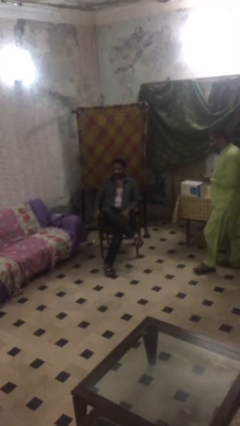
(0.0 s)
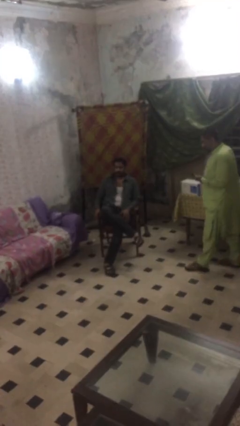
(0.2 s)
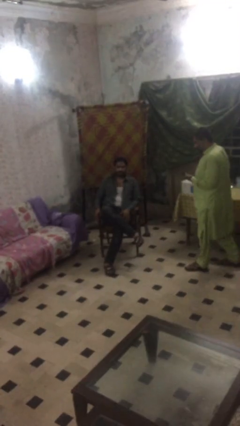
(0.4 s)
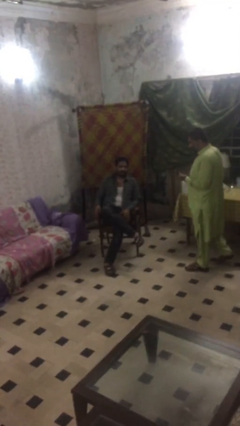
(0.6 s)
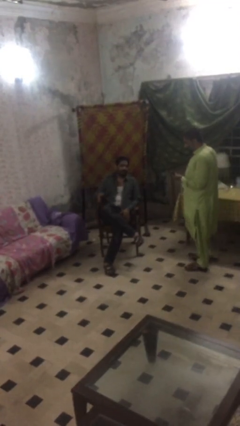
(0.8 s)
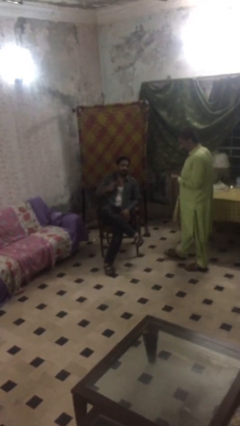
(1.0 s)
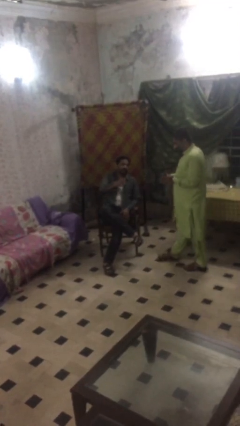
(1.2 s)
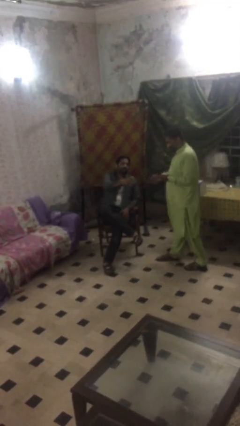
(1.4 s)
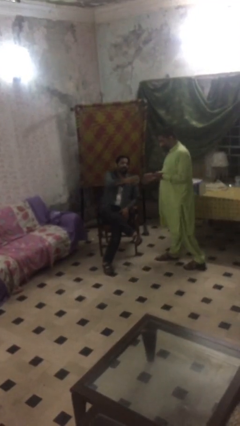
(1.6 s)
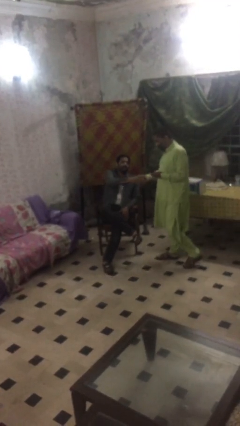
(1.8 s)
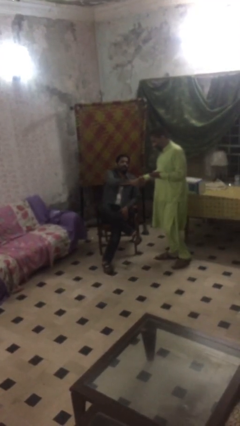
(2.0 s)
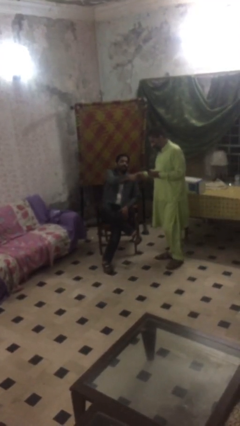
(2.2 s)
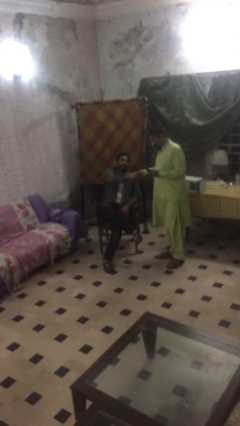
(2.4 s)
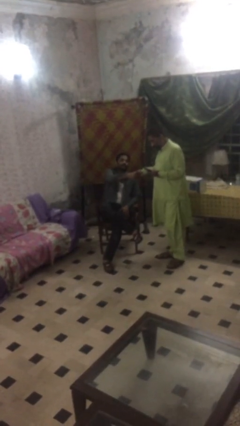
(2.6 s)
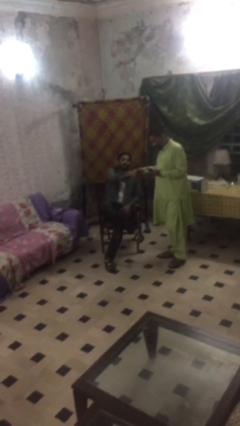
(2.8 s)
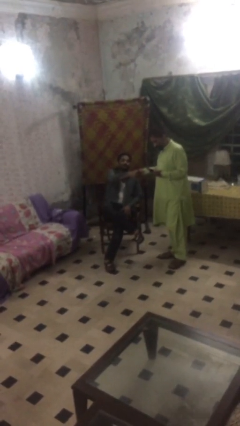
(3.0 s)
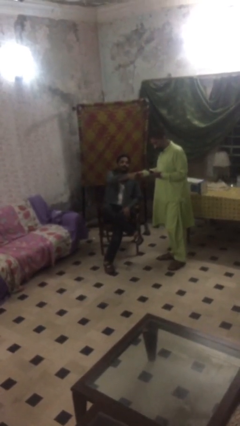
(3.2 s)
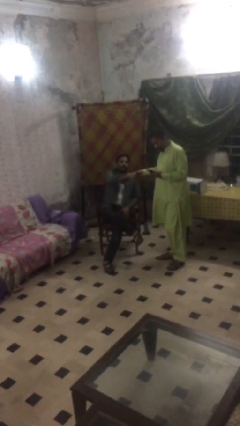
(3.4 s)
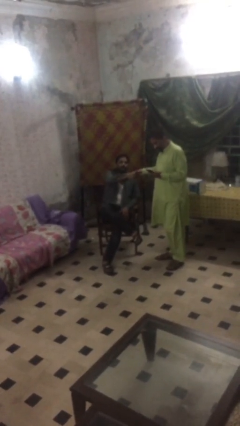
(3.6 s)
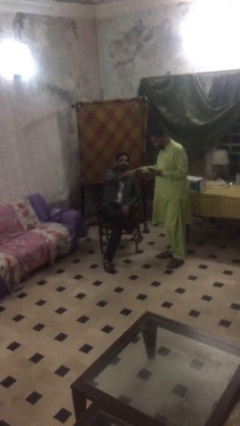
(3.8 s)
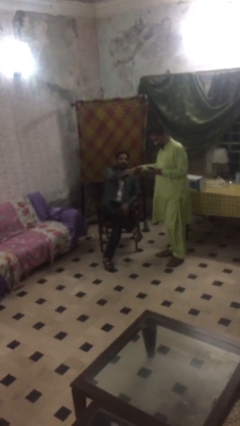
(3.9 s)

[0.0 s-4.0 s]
person shakes hand

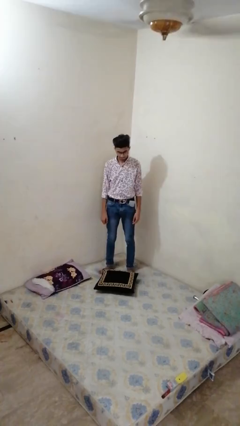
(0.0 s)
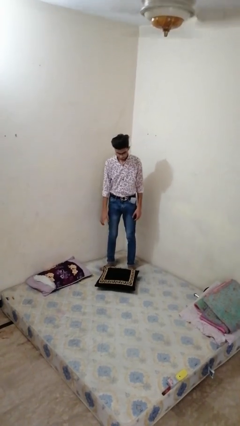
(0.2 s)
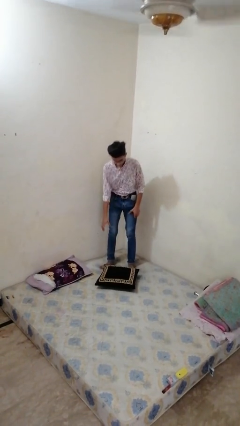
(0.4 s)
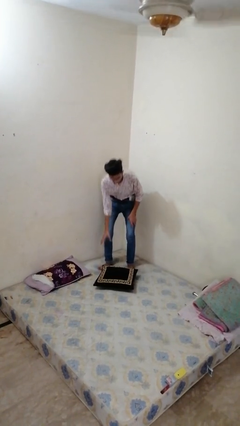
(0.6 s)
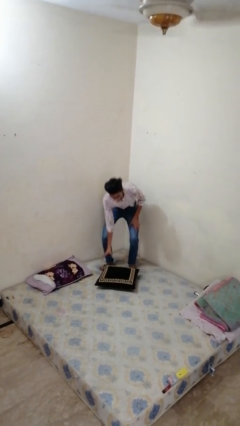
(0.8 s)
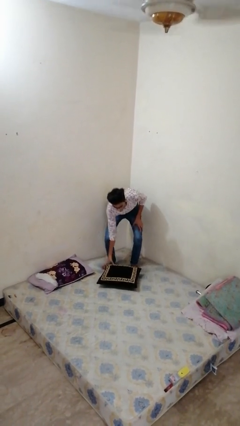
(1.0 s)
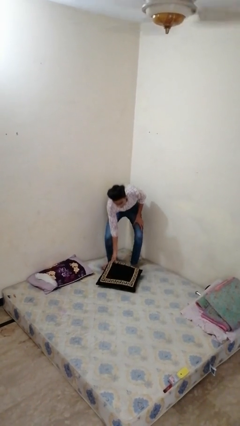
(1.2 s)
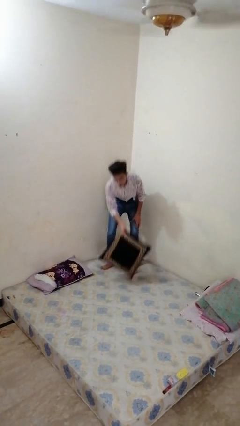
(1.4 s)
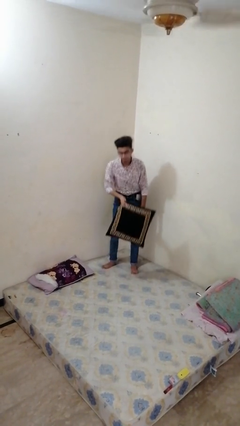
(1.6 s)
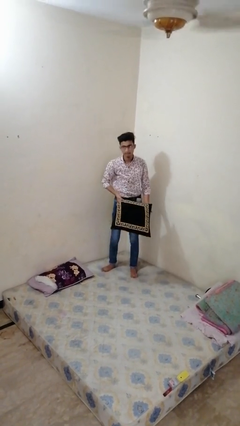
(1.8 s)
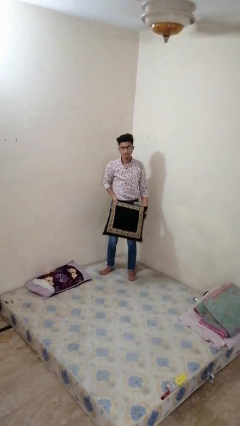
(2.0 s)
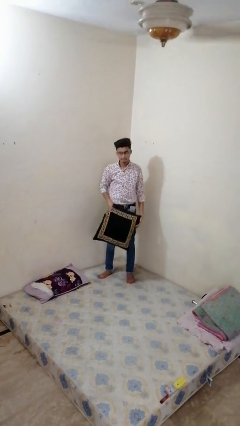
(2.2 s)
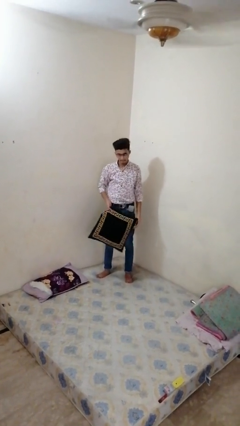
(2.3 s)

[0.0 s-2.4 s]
person picks up object from bed

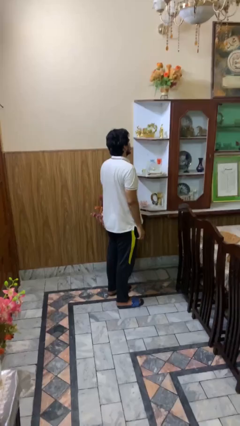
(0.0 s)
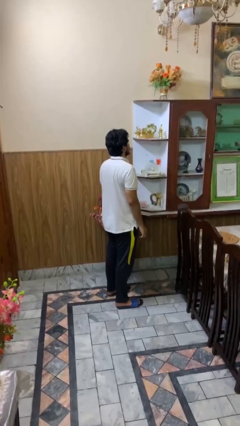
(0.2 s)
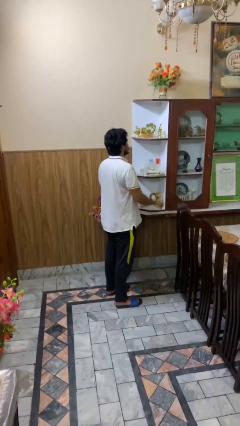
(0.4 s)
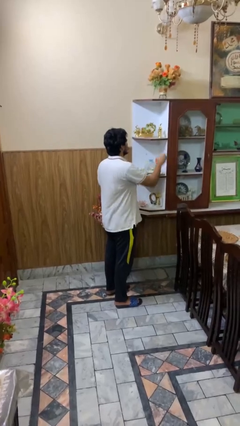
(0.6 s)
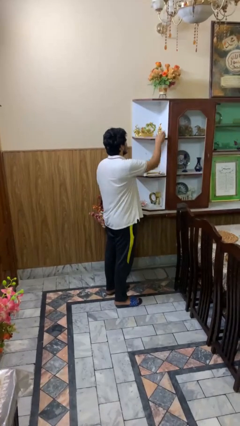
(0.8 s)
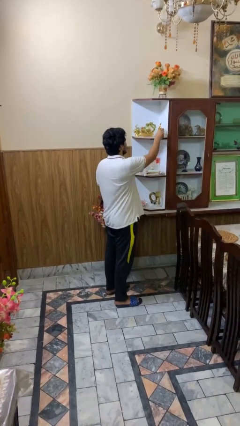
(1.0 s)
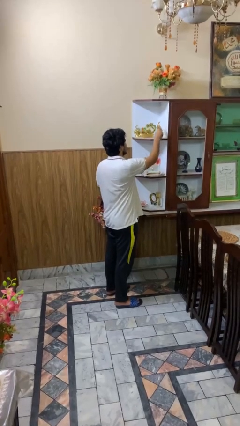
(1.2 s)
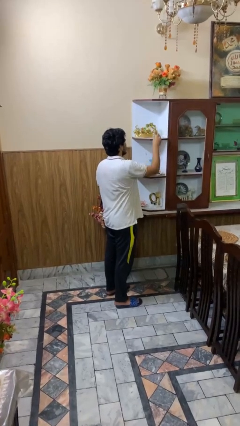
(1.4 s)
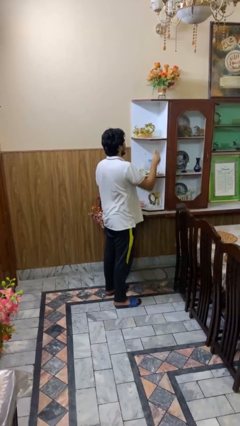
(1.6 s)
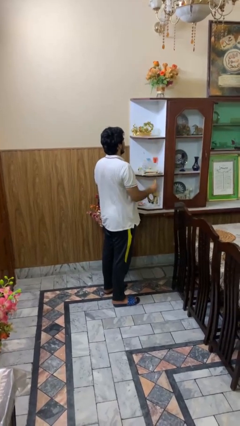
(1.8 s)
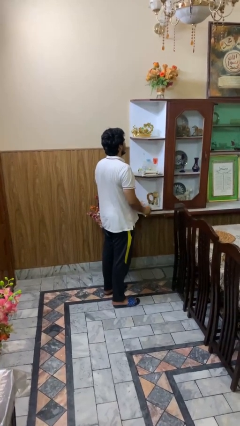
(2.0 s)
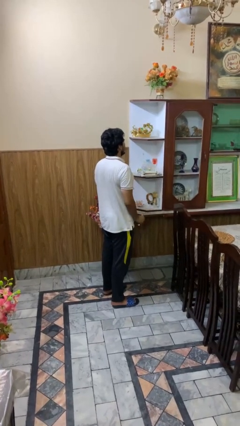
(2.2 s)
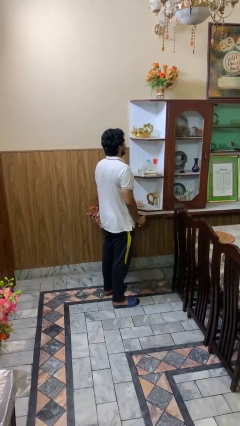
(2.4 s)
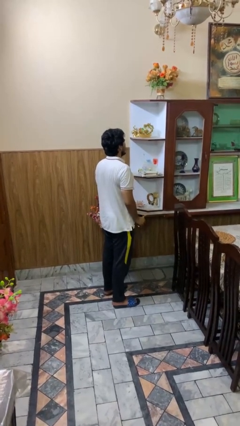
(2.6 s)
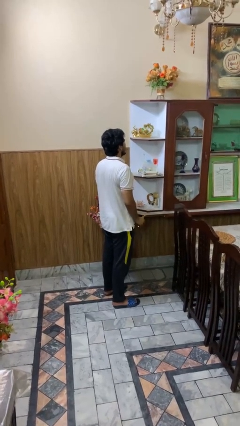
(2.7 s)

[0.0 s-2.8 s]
person picks up object from shelf

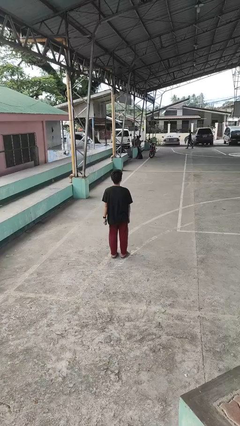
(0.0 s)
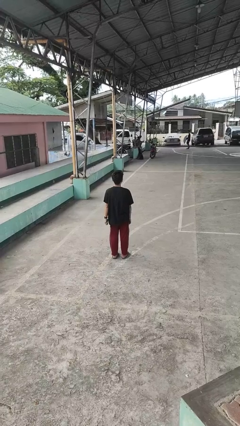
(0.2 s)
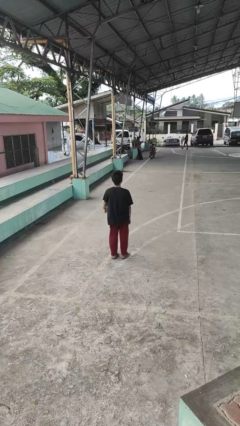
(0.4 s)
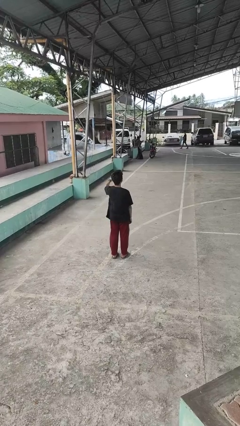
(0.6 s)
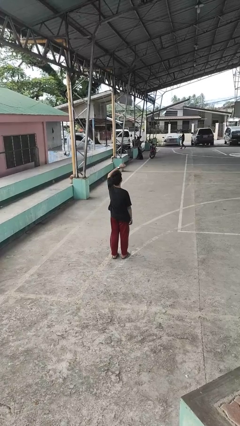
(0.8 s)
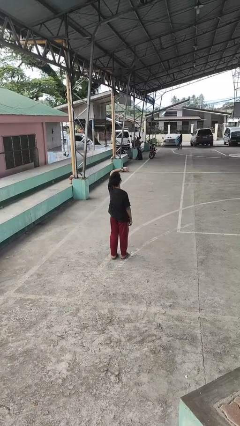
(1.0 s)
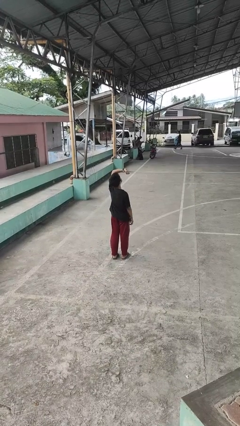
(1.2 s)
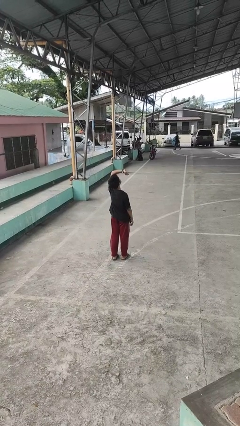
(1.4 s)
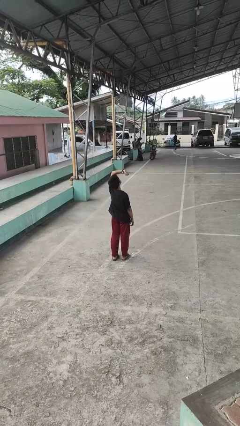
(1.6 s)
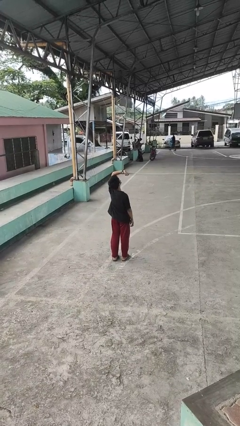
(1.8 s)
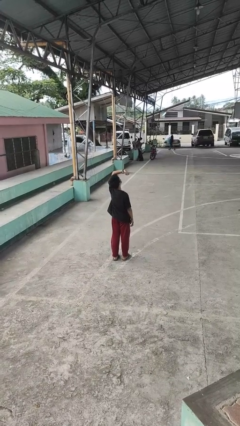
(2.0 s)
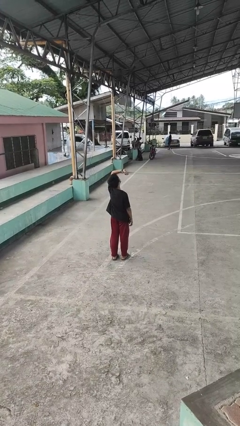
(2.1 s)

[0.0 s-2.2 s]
person looks at wristwatch

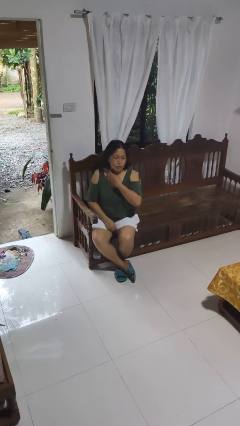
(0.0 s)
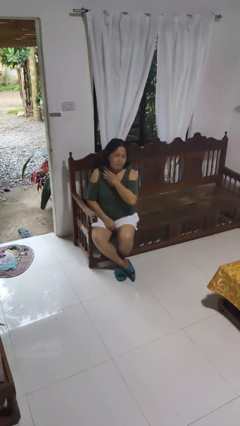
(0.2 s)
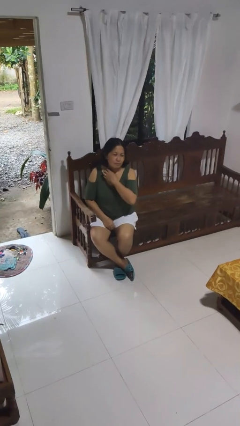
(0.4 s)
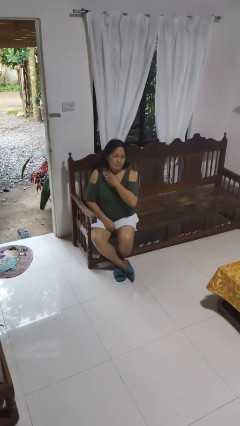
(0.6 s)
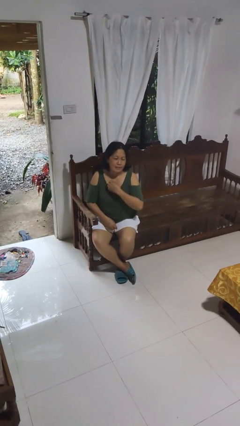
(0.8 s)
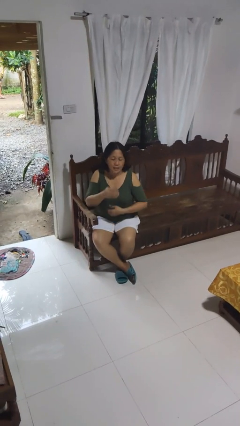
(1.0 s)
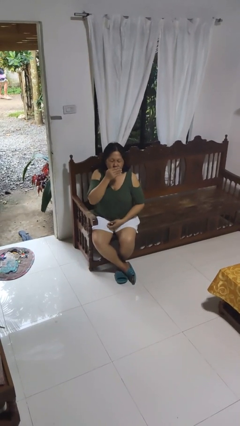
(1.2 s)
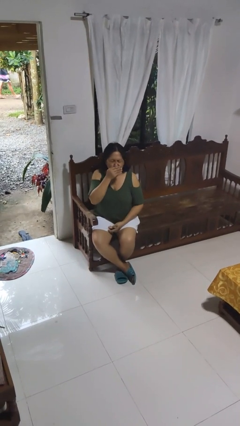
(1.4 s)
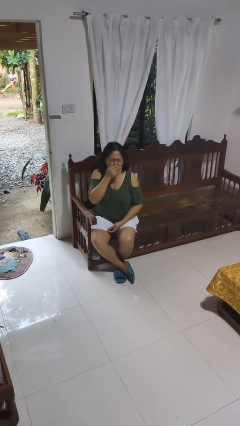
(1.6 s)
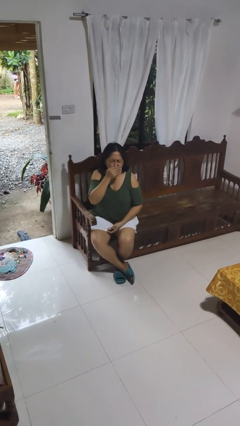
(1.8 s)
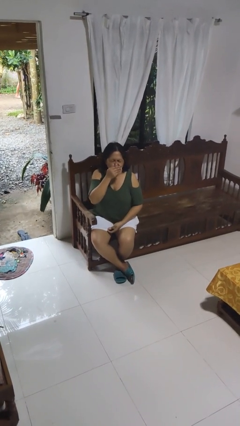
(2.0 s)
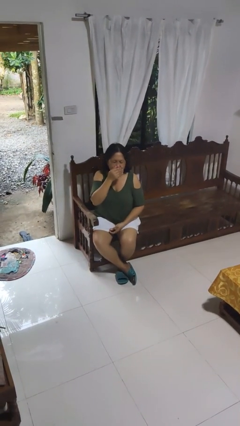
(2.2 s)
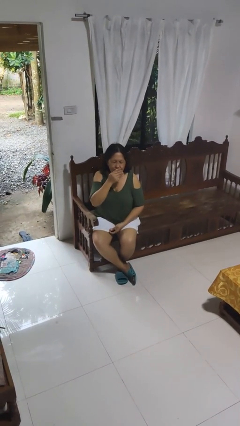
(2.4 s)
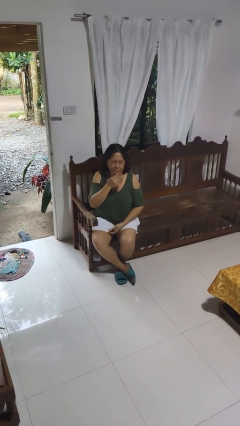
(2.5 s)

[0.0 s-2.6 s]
person sneezes into hand

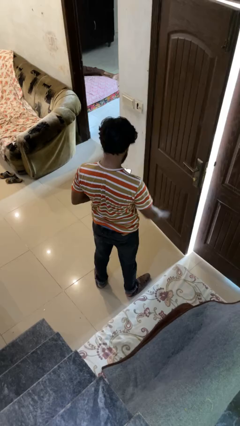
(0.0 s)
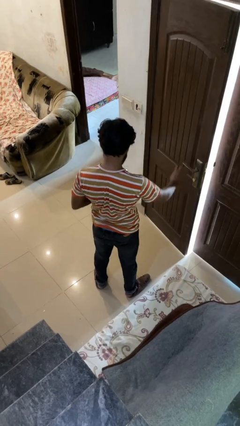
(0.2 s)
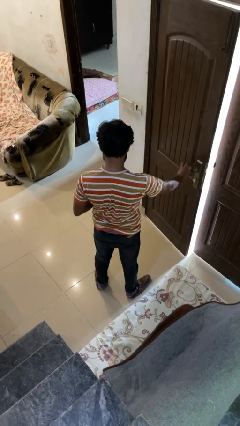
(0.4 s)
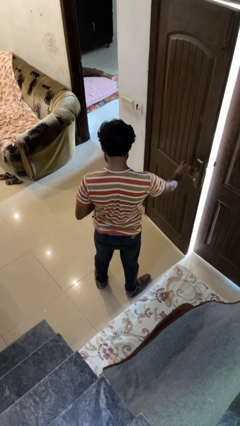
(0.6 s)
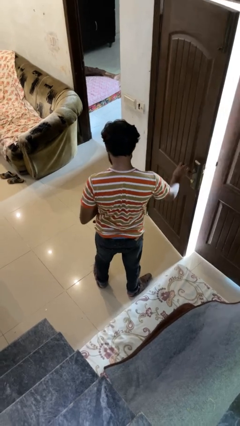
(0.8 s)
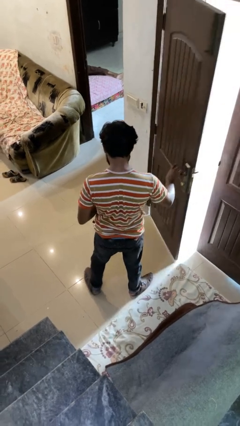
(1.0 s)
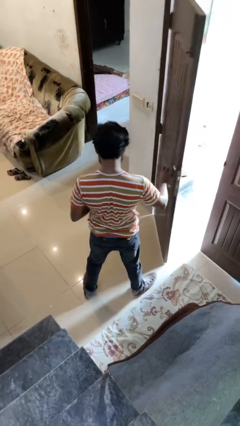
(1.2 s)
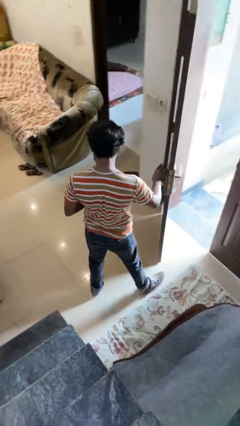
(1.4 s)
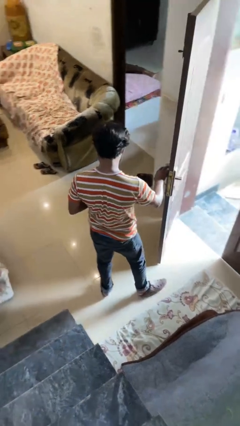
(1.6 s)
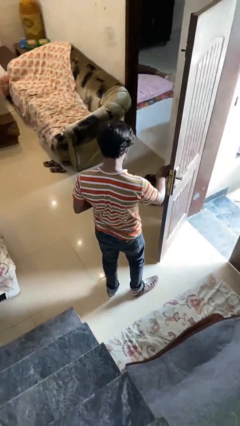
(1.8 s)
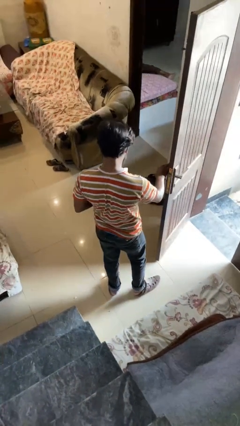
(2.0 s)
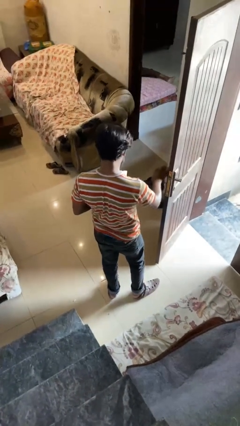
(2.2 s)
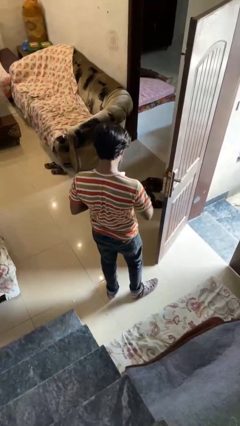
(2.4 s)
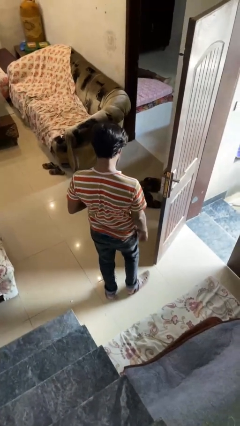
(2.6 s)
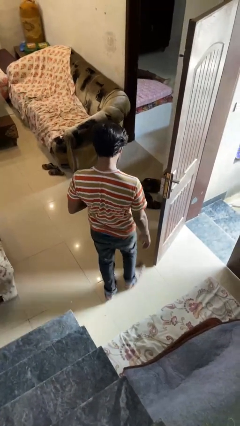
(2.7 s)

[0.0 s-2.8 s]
person opens facility door

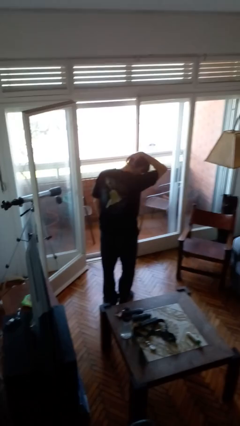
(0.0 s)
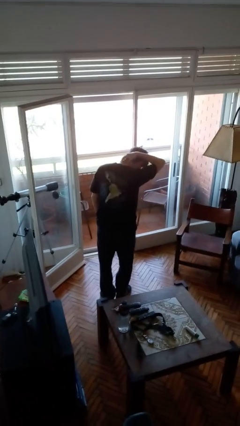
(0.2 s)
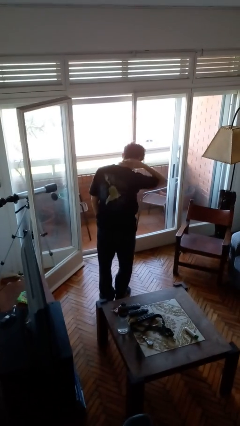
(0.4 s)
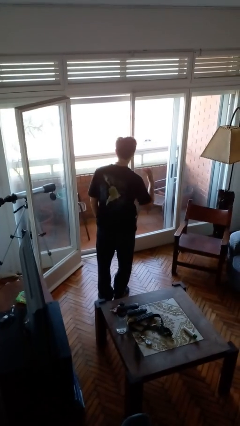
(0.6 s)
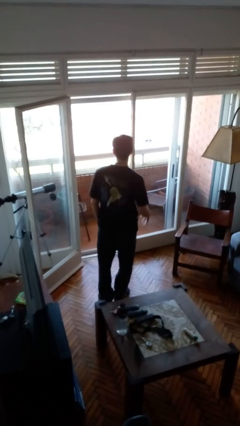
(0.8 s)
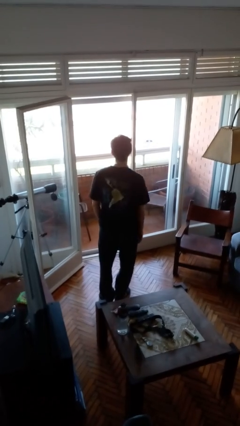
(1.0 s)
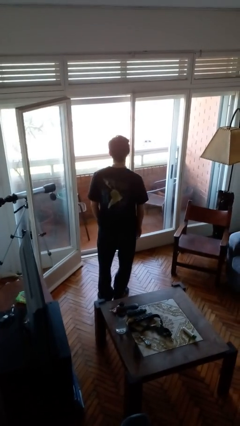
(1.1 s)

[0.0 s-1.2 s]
person puts on necklace
